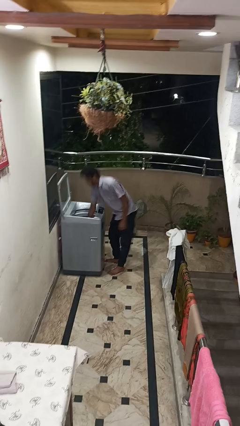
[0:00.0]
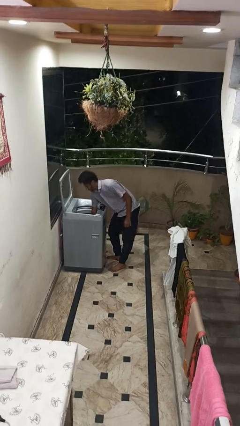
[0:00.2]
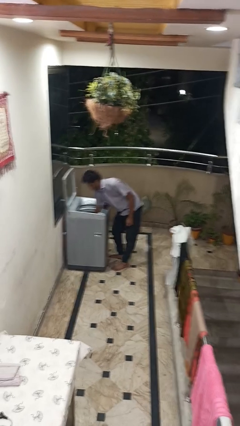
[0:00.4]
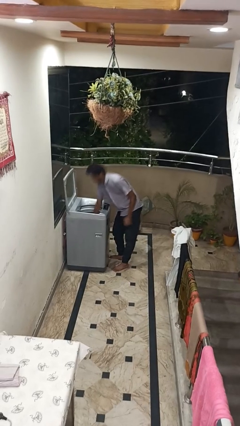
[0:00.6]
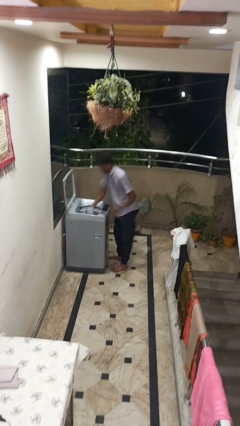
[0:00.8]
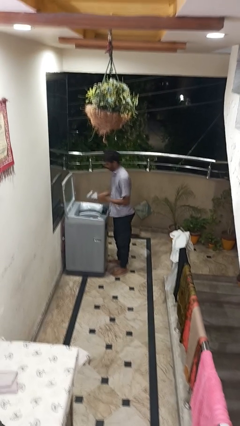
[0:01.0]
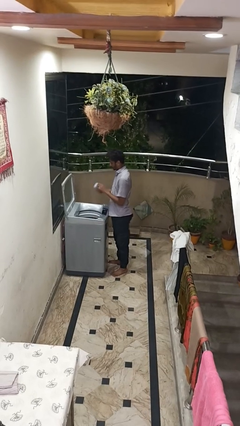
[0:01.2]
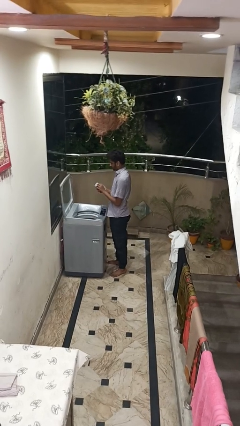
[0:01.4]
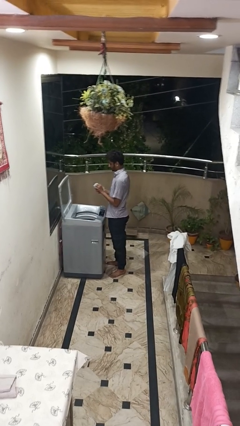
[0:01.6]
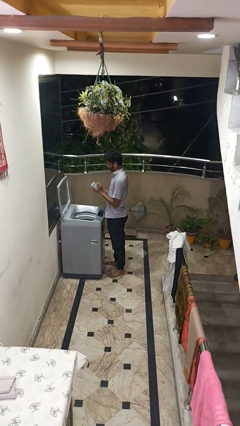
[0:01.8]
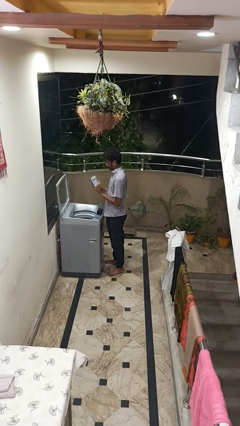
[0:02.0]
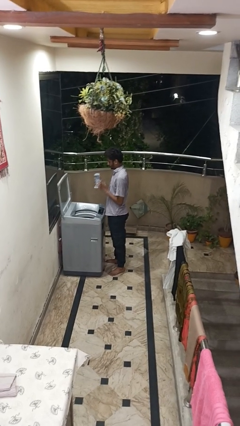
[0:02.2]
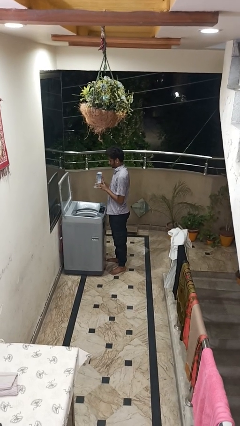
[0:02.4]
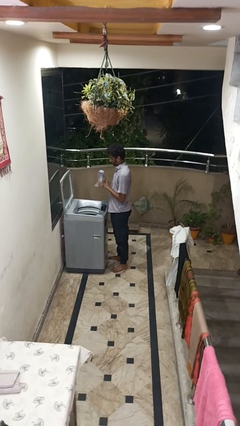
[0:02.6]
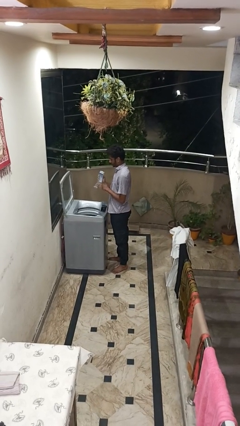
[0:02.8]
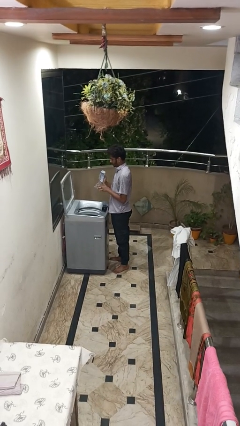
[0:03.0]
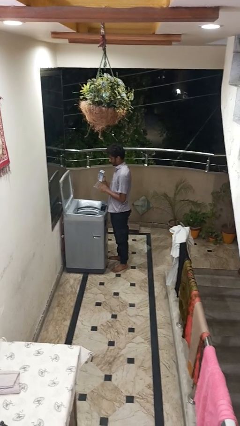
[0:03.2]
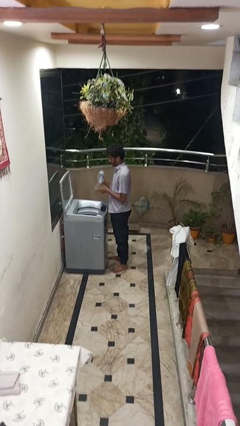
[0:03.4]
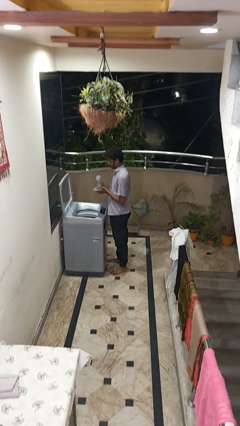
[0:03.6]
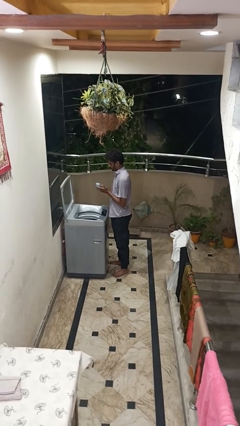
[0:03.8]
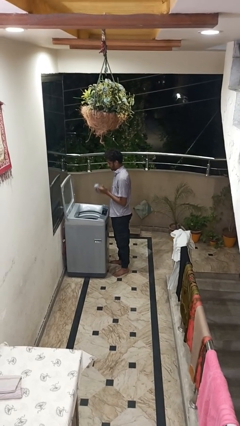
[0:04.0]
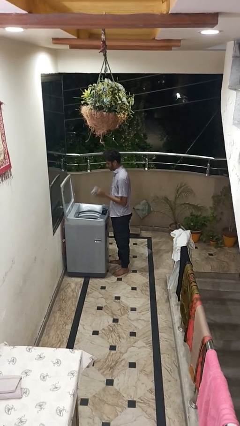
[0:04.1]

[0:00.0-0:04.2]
person cleans dryer lint trap

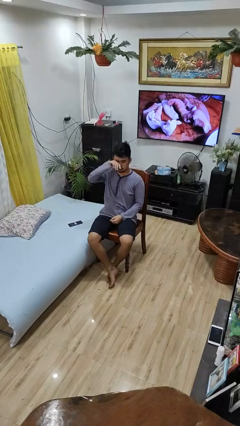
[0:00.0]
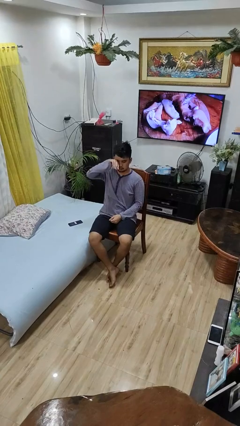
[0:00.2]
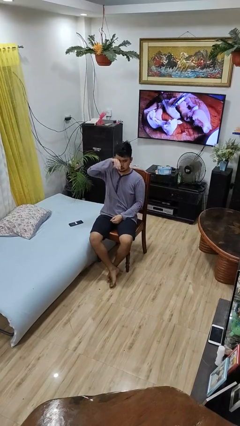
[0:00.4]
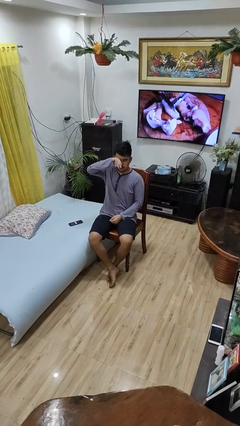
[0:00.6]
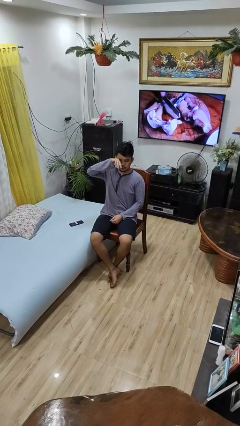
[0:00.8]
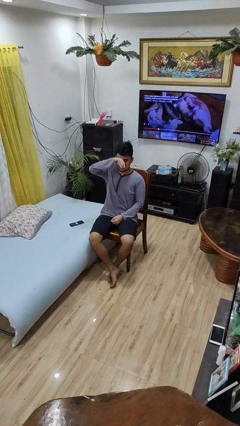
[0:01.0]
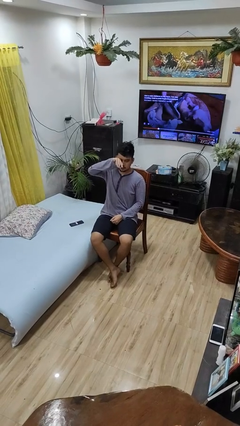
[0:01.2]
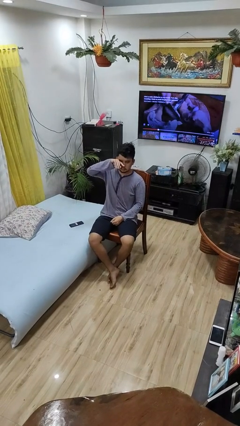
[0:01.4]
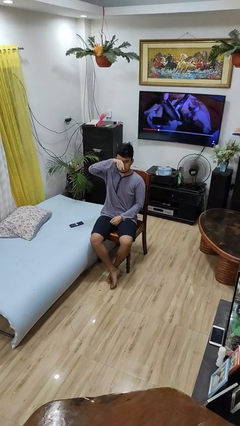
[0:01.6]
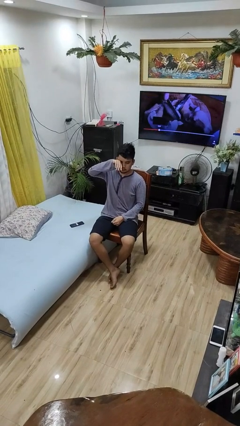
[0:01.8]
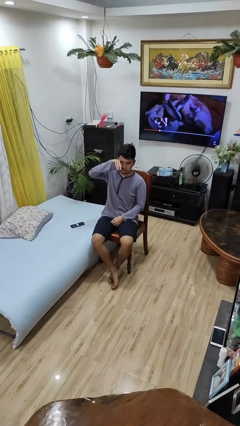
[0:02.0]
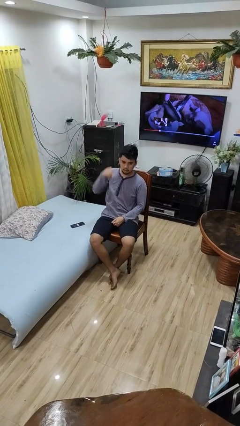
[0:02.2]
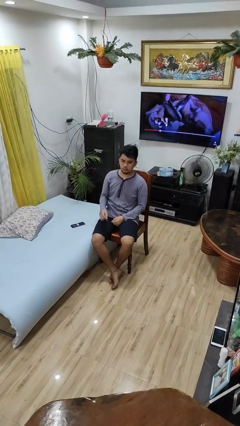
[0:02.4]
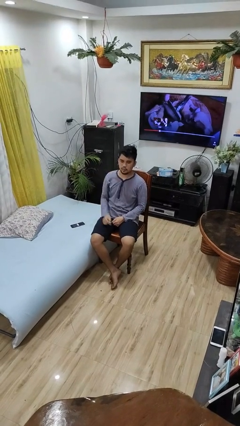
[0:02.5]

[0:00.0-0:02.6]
person rubs eyes

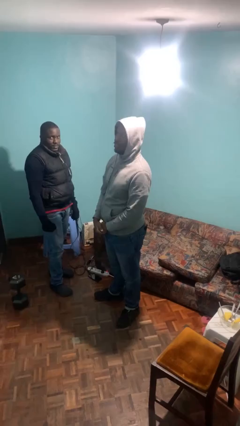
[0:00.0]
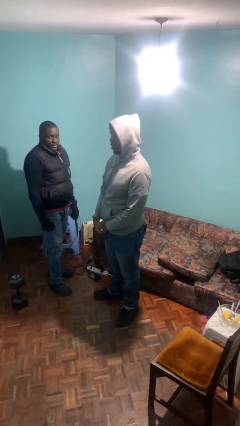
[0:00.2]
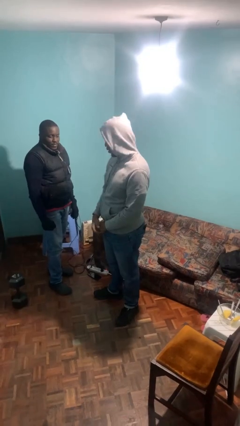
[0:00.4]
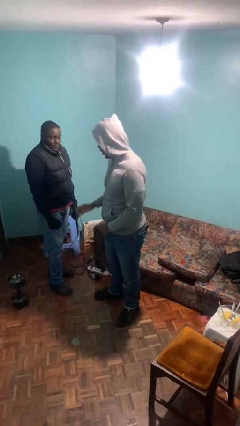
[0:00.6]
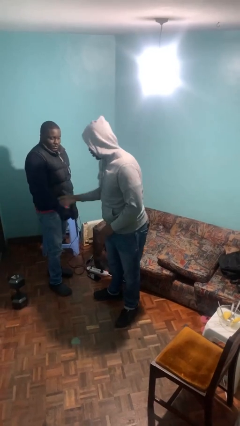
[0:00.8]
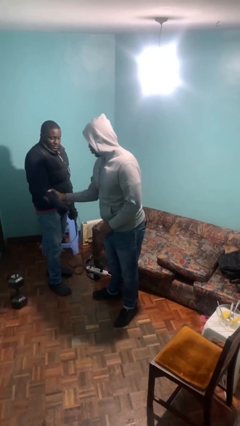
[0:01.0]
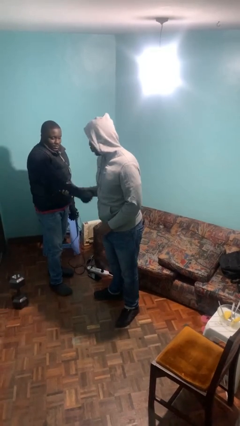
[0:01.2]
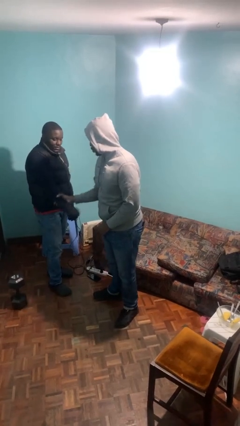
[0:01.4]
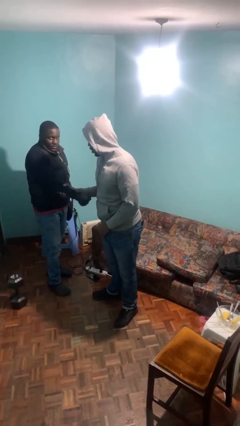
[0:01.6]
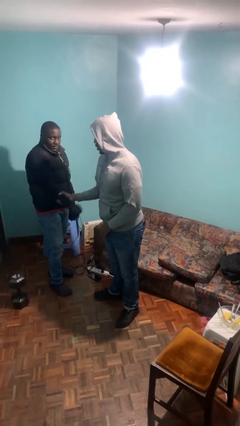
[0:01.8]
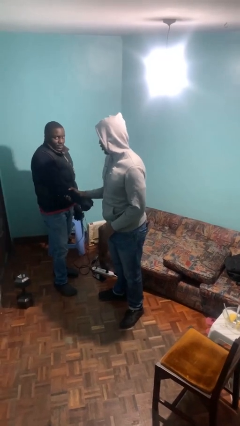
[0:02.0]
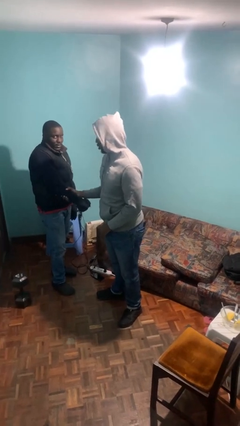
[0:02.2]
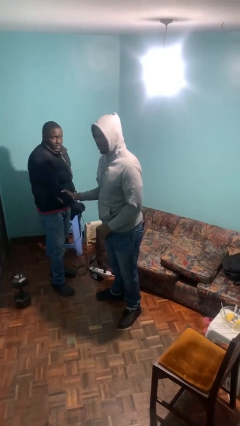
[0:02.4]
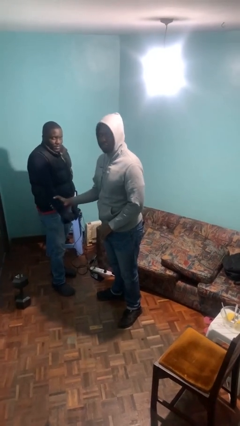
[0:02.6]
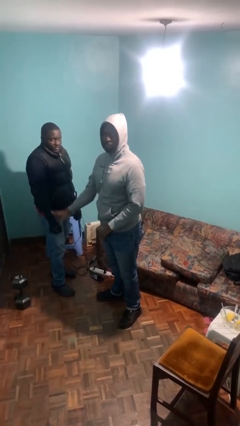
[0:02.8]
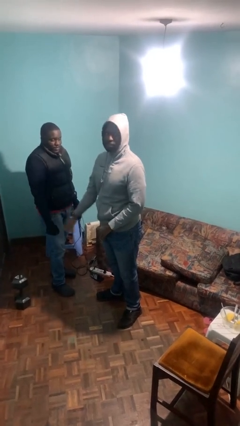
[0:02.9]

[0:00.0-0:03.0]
person grabs person by forearm

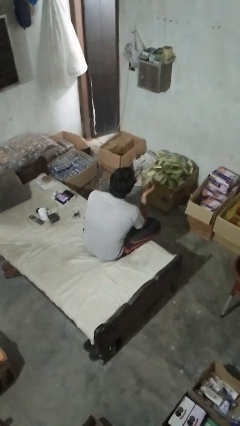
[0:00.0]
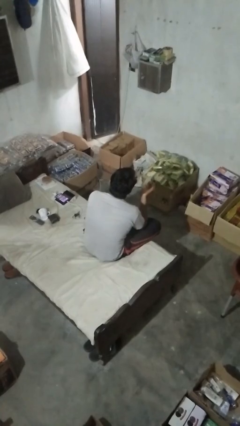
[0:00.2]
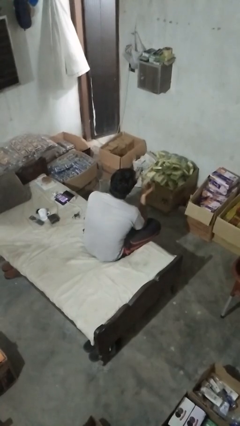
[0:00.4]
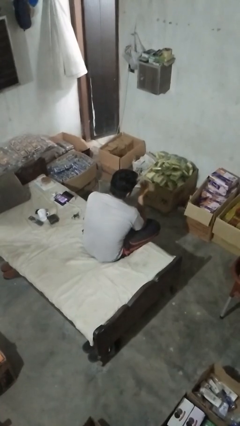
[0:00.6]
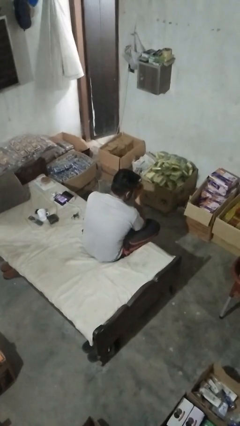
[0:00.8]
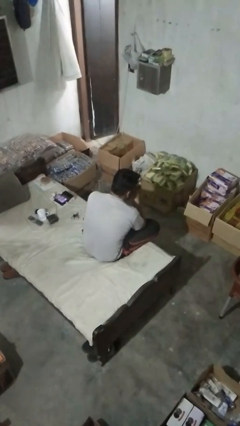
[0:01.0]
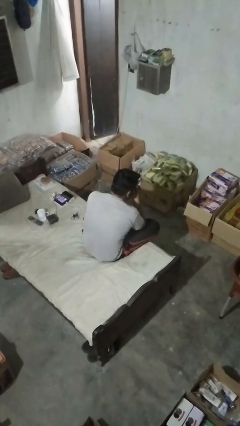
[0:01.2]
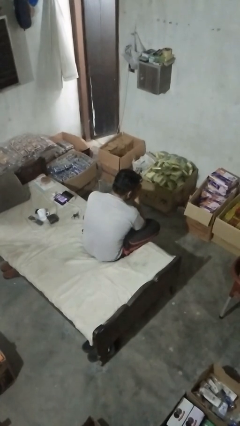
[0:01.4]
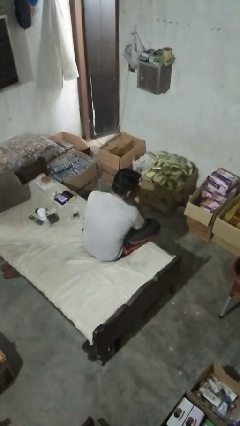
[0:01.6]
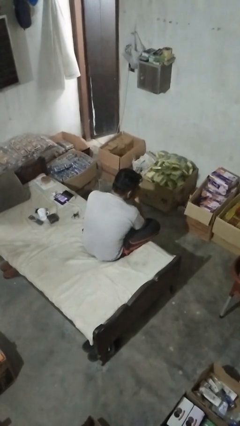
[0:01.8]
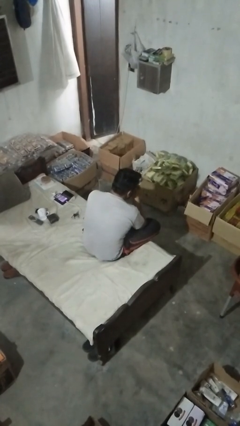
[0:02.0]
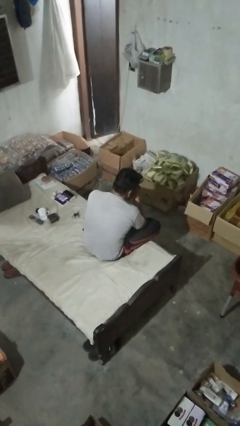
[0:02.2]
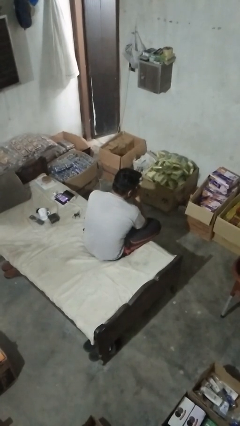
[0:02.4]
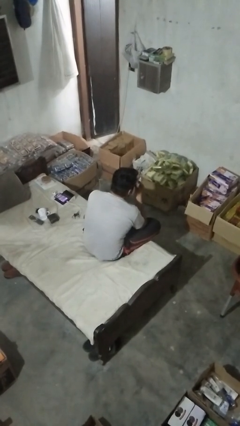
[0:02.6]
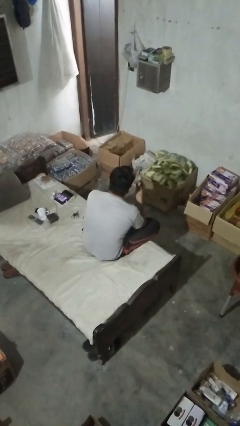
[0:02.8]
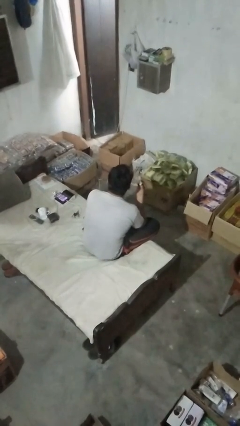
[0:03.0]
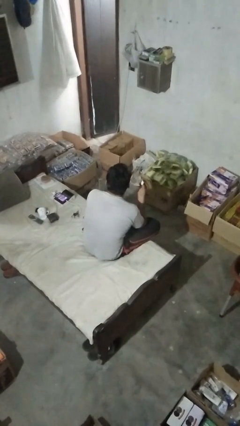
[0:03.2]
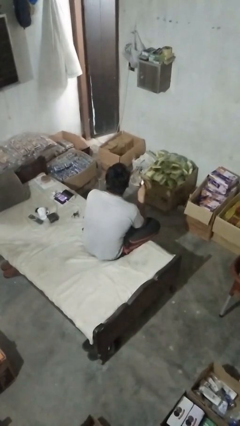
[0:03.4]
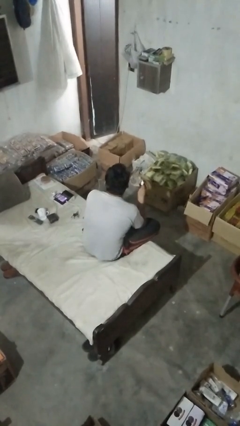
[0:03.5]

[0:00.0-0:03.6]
person blows nose

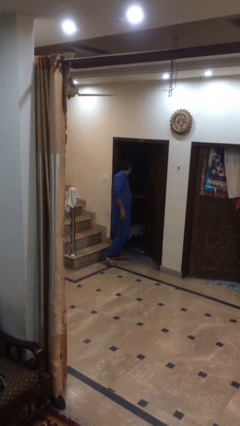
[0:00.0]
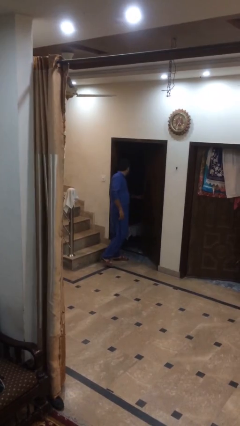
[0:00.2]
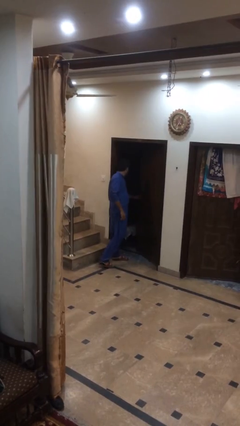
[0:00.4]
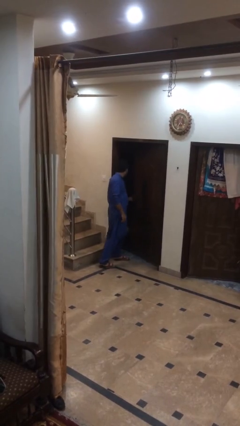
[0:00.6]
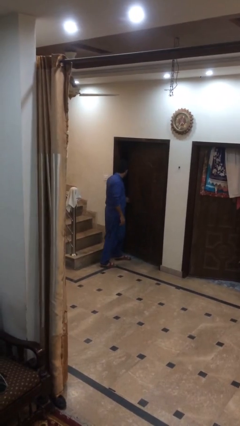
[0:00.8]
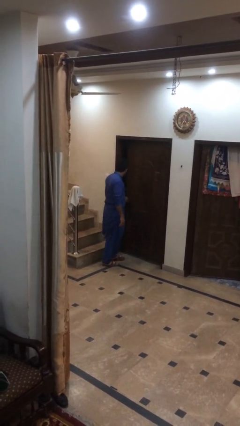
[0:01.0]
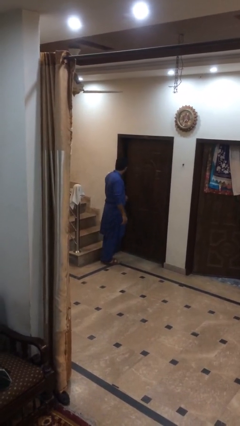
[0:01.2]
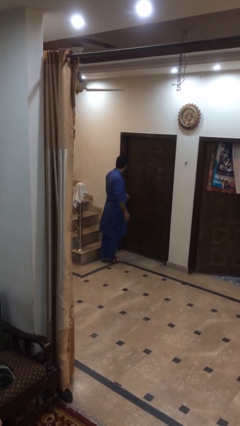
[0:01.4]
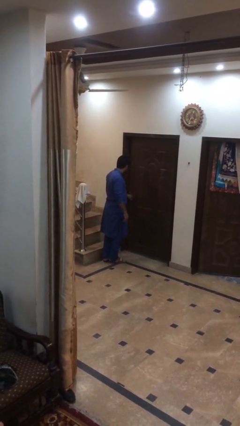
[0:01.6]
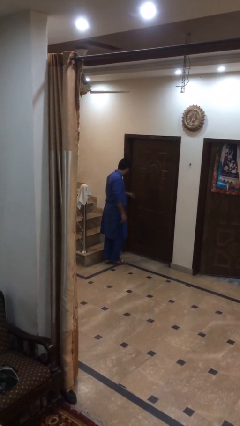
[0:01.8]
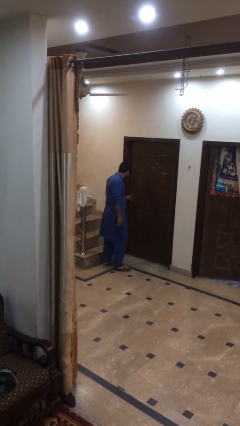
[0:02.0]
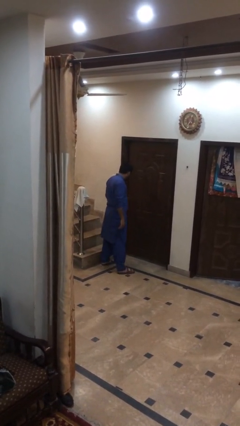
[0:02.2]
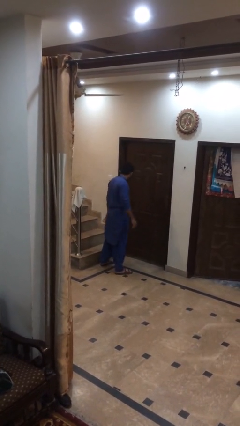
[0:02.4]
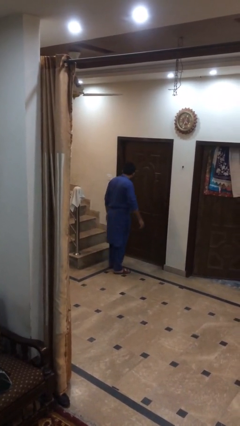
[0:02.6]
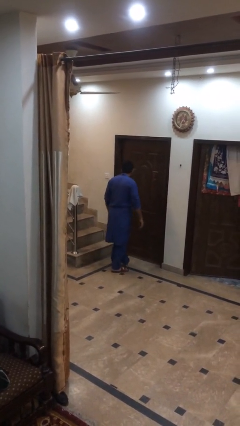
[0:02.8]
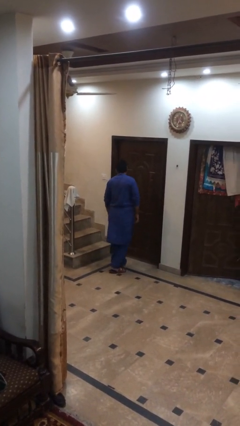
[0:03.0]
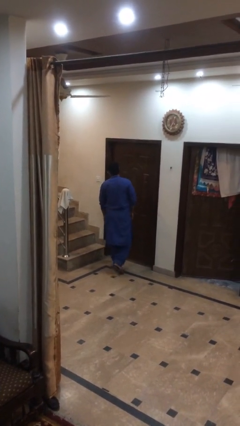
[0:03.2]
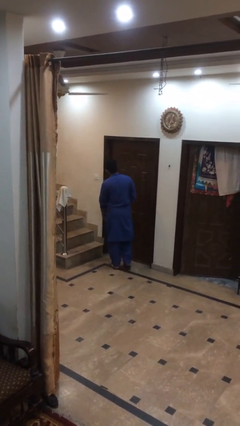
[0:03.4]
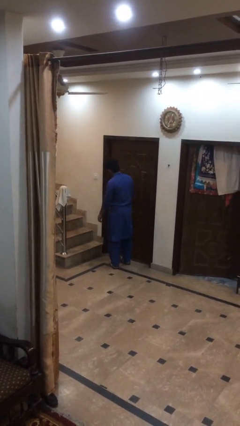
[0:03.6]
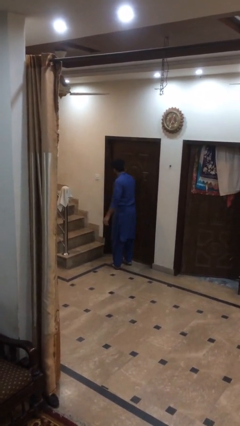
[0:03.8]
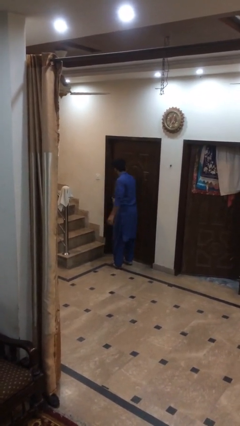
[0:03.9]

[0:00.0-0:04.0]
person closes facility door
